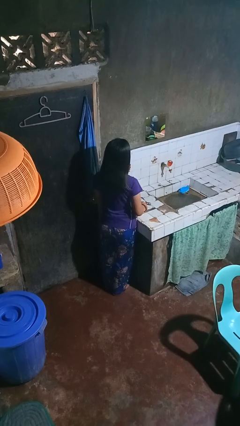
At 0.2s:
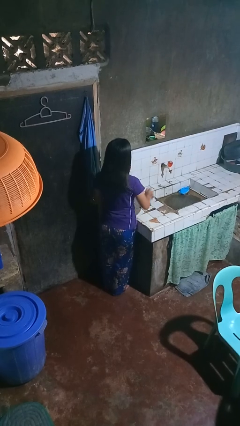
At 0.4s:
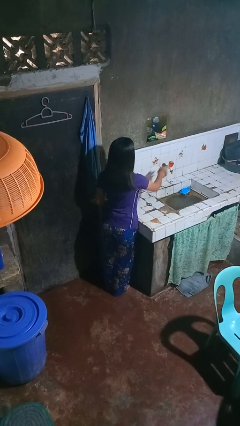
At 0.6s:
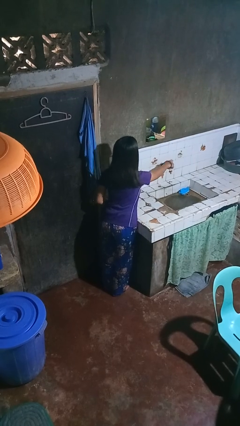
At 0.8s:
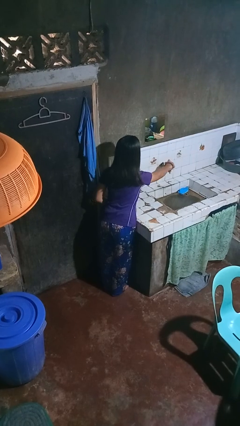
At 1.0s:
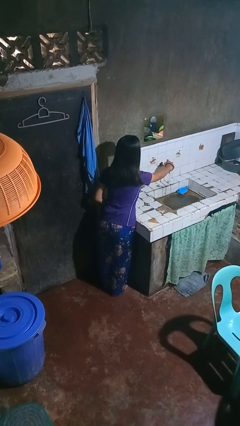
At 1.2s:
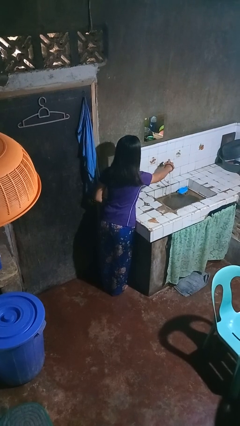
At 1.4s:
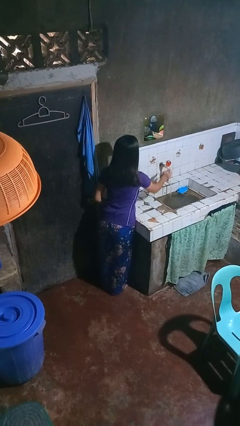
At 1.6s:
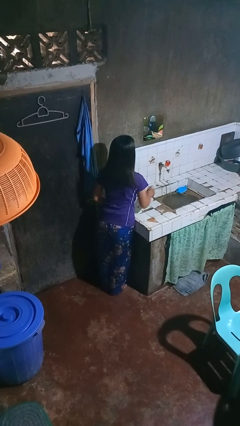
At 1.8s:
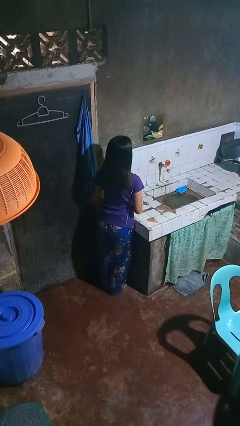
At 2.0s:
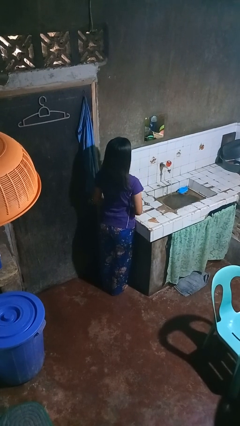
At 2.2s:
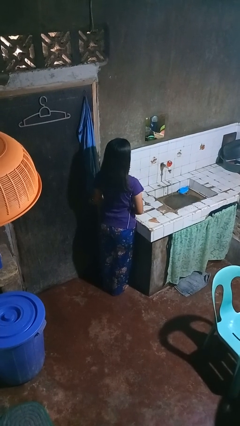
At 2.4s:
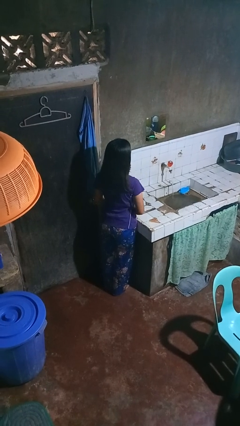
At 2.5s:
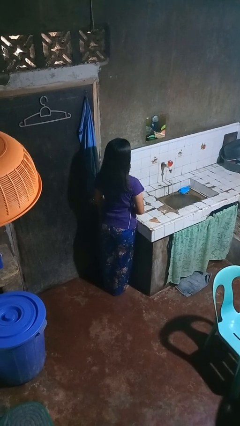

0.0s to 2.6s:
person turns on faucet

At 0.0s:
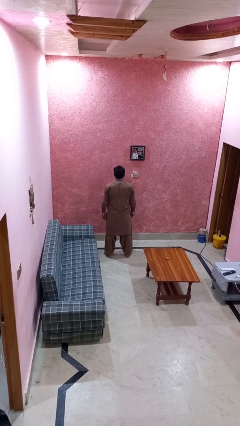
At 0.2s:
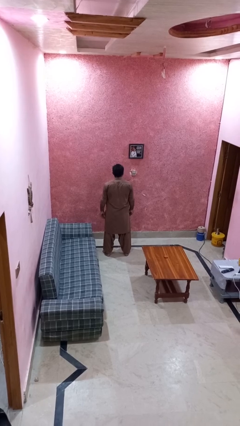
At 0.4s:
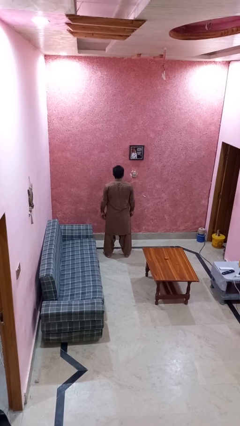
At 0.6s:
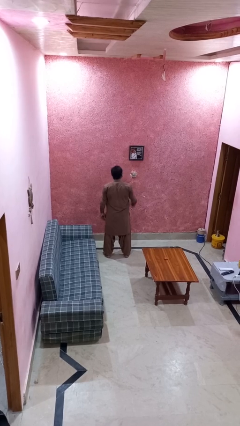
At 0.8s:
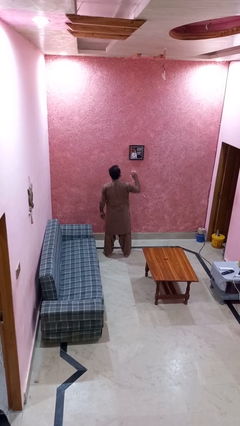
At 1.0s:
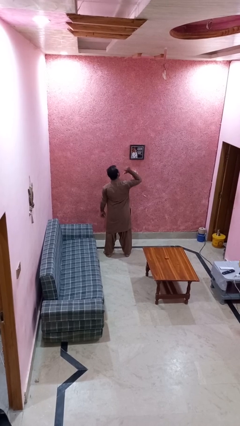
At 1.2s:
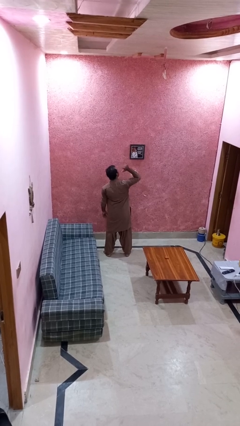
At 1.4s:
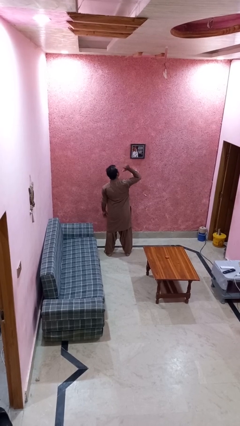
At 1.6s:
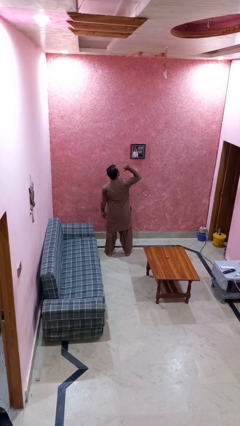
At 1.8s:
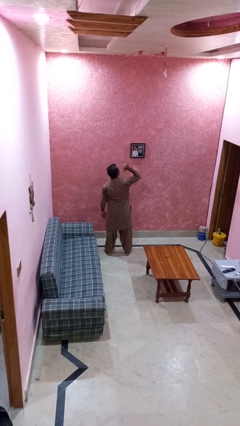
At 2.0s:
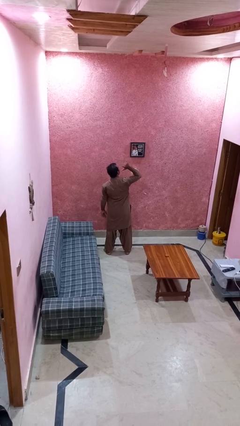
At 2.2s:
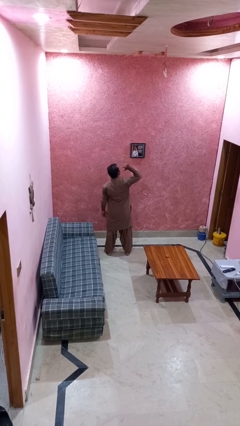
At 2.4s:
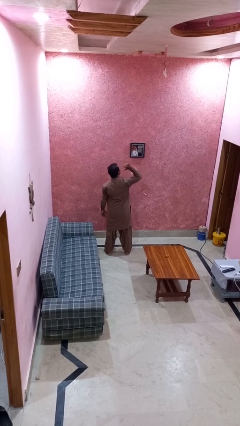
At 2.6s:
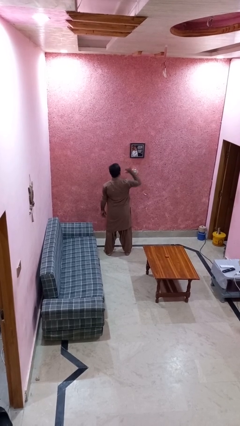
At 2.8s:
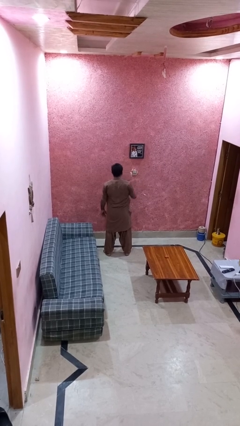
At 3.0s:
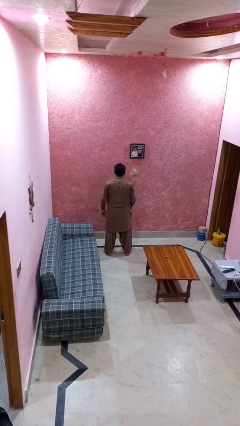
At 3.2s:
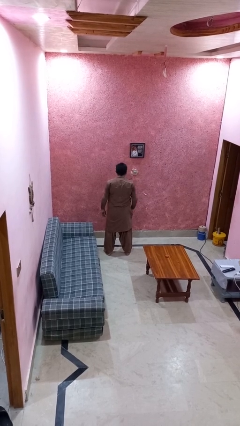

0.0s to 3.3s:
person gestures behind me

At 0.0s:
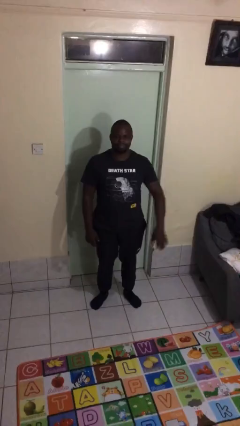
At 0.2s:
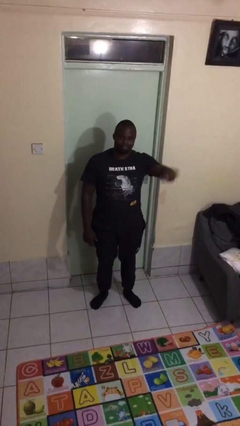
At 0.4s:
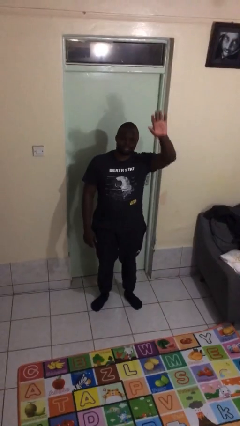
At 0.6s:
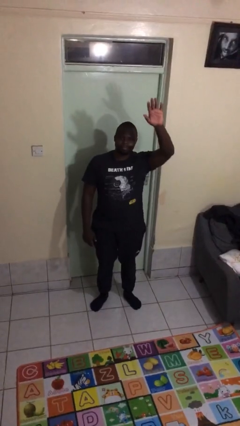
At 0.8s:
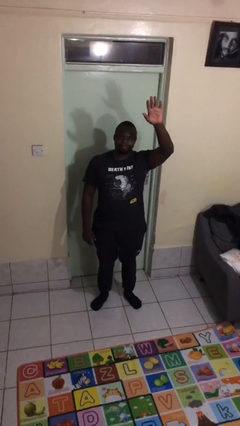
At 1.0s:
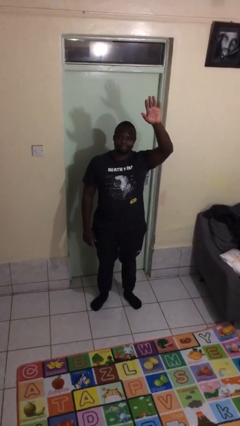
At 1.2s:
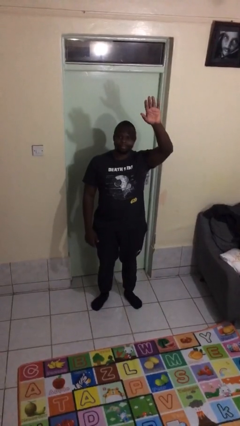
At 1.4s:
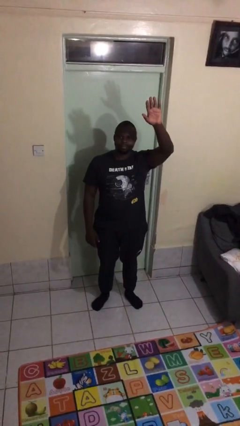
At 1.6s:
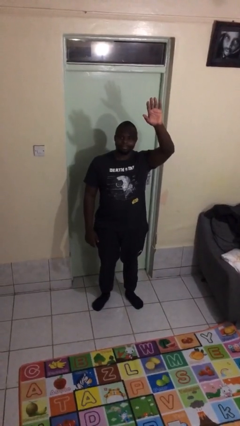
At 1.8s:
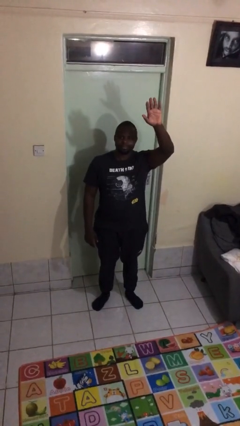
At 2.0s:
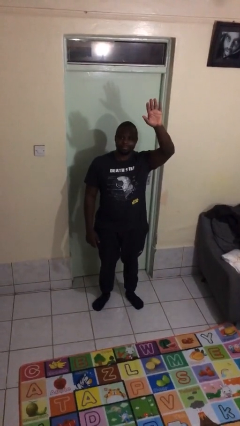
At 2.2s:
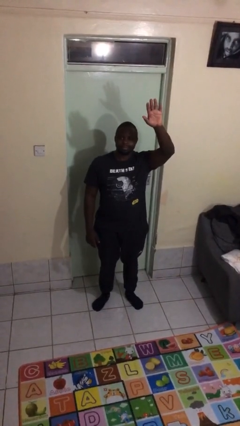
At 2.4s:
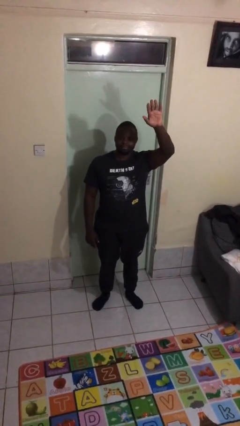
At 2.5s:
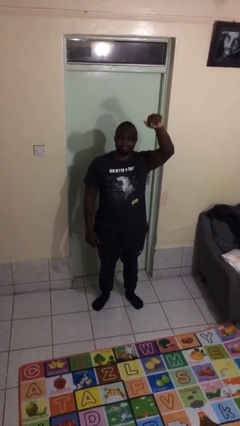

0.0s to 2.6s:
person gestures raise hand

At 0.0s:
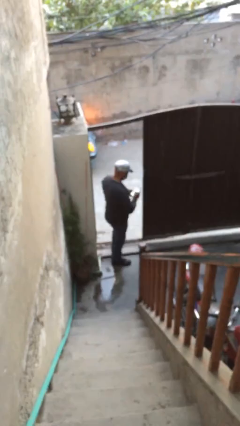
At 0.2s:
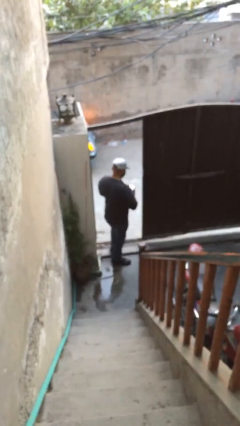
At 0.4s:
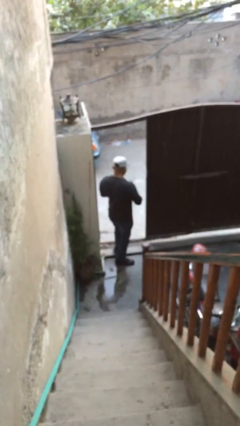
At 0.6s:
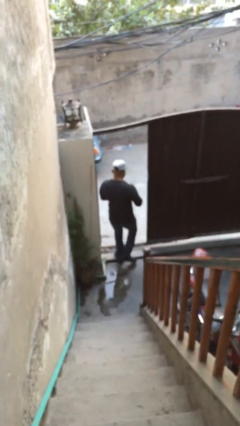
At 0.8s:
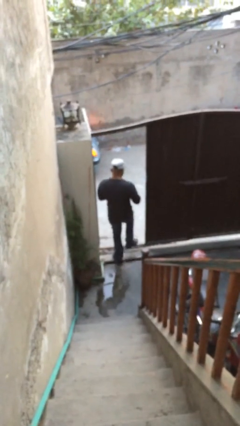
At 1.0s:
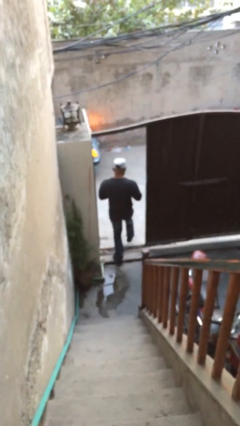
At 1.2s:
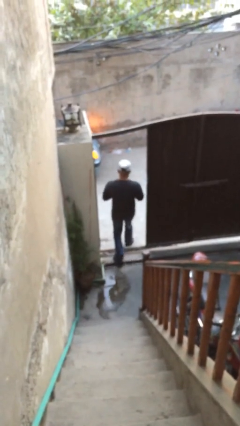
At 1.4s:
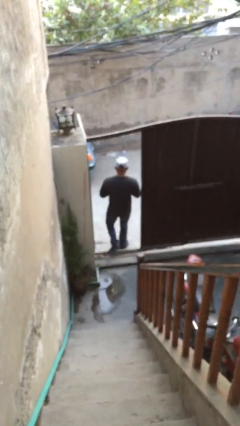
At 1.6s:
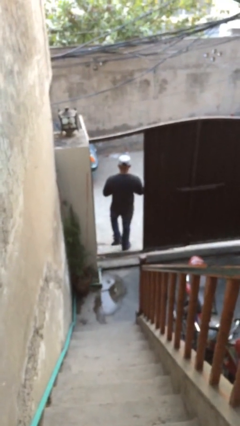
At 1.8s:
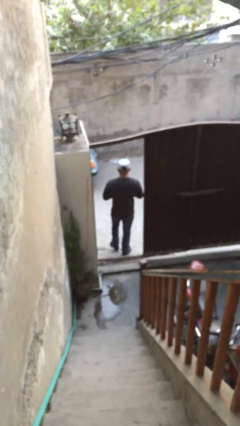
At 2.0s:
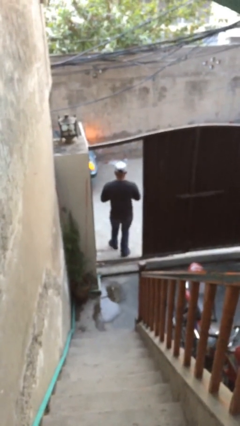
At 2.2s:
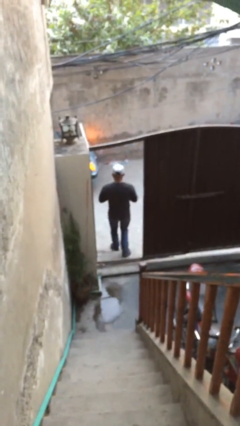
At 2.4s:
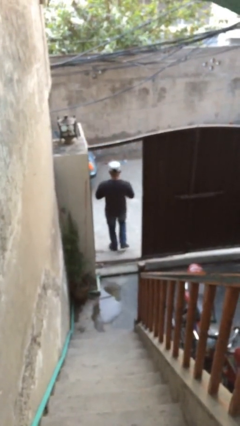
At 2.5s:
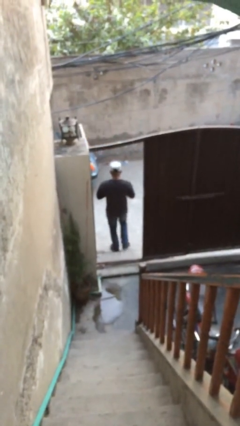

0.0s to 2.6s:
person exits scene through structure

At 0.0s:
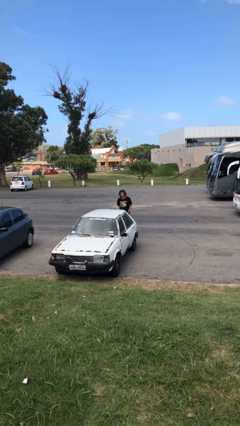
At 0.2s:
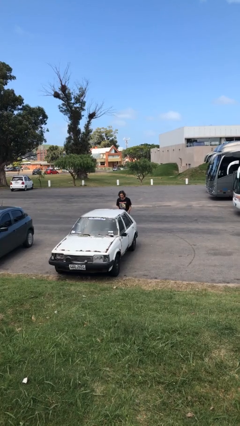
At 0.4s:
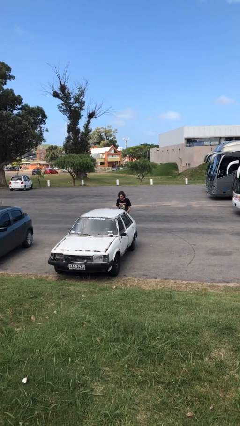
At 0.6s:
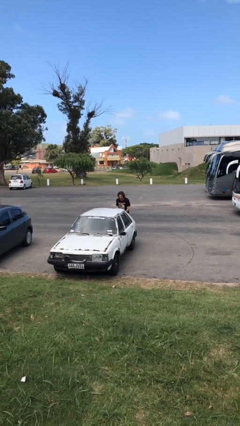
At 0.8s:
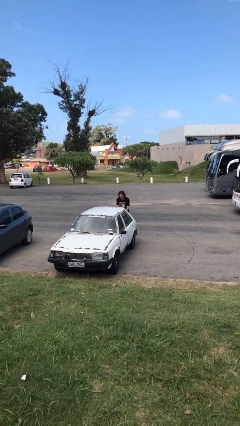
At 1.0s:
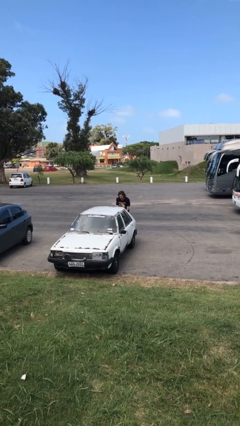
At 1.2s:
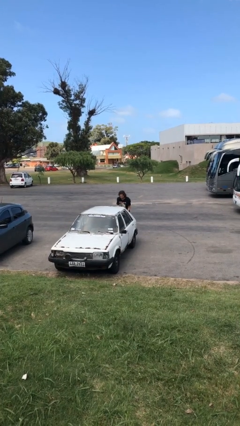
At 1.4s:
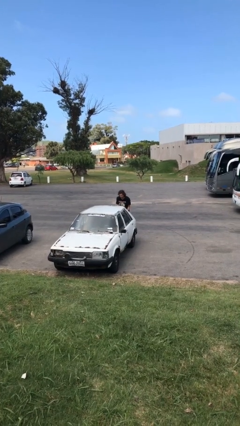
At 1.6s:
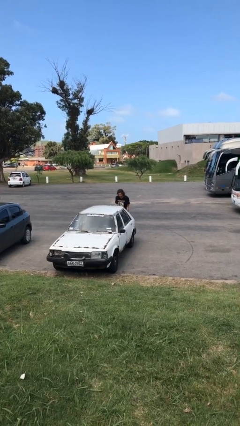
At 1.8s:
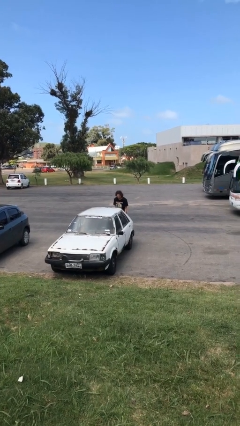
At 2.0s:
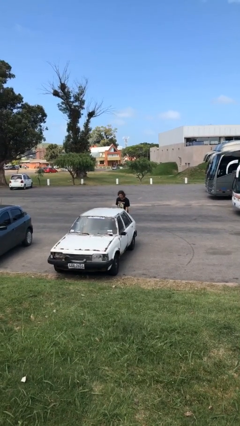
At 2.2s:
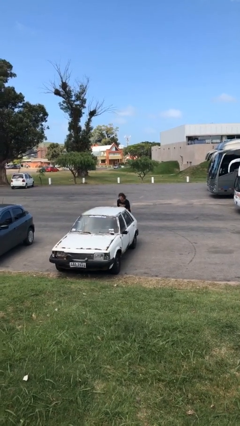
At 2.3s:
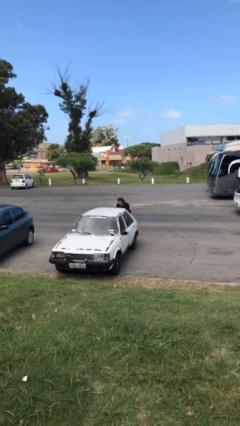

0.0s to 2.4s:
person loads car

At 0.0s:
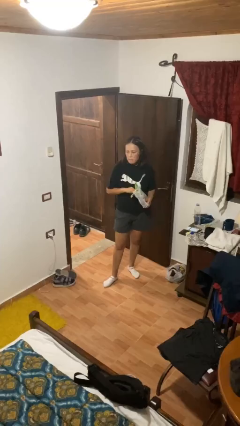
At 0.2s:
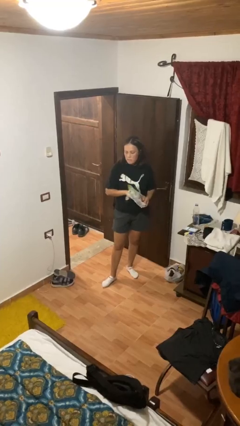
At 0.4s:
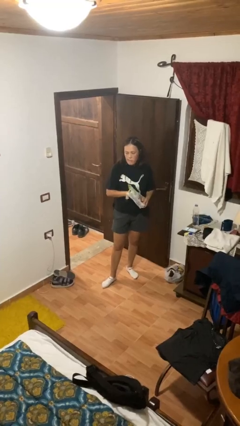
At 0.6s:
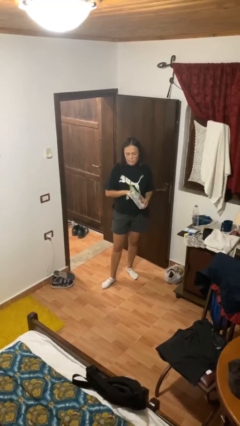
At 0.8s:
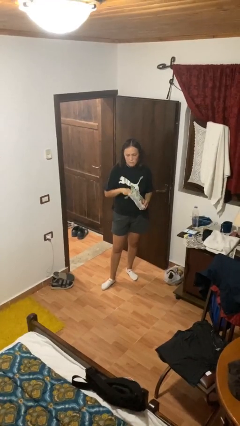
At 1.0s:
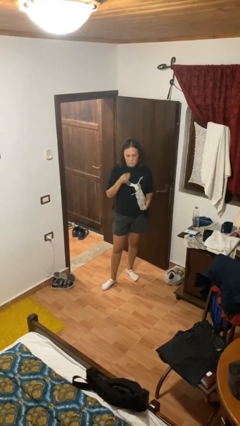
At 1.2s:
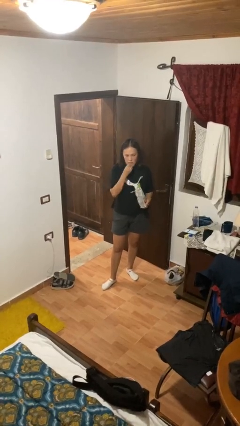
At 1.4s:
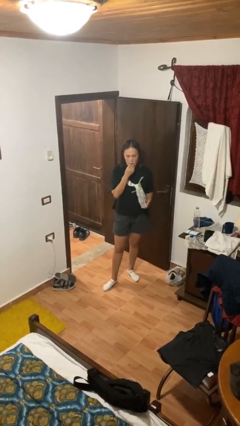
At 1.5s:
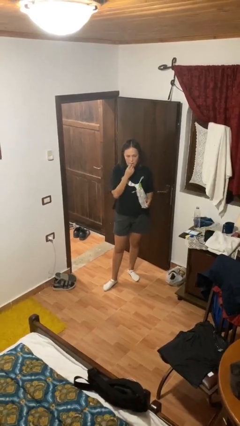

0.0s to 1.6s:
person eats snack from bag

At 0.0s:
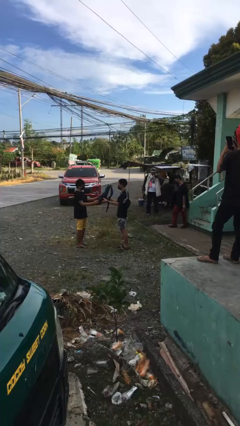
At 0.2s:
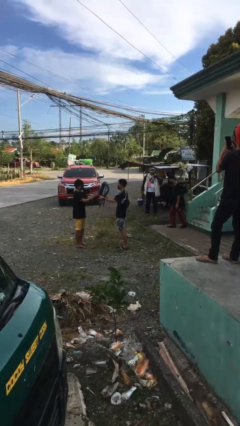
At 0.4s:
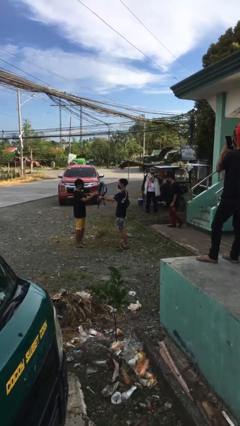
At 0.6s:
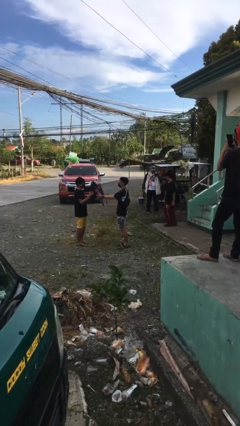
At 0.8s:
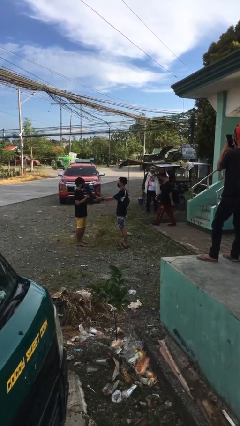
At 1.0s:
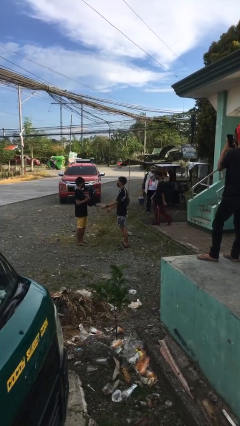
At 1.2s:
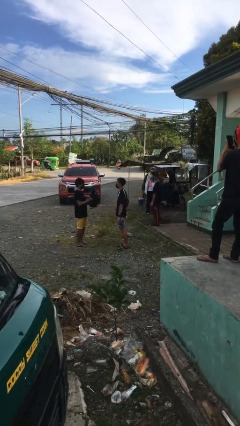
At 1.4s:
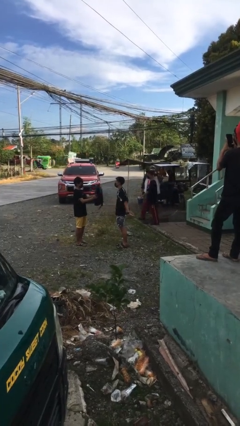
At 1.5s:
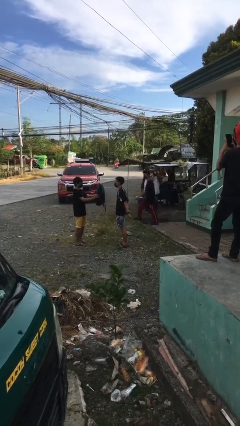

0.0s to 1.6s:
person transfers object to person

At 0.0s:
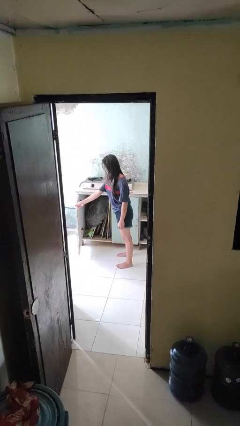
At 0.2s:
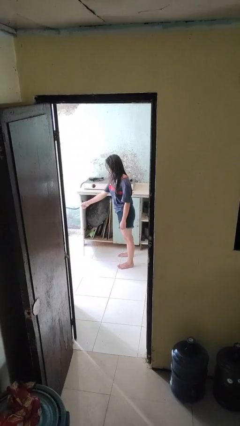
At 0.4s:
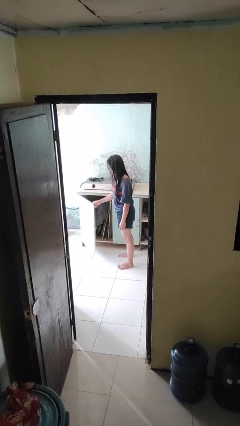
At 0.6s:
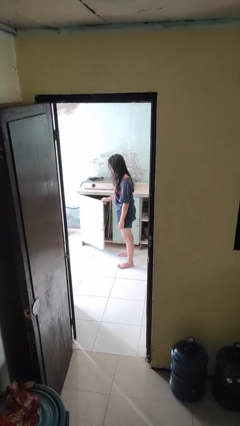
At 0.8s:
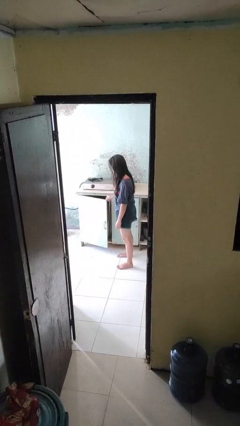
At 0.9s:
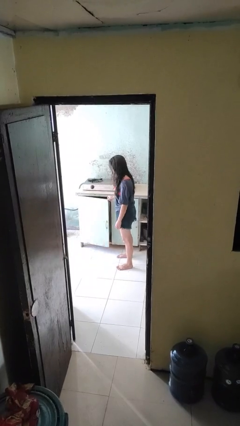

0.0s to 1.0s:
person closes cabinet
